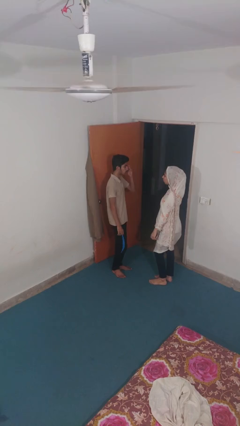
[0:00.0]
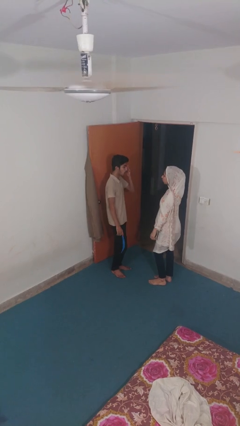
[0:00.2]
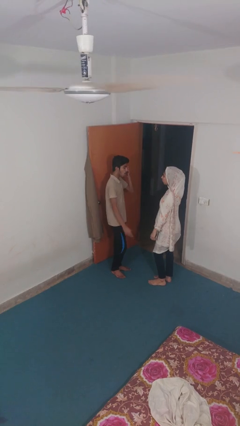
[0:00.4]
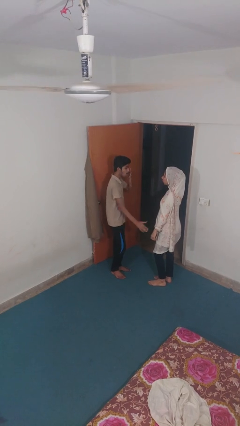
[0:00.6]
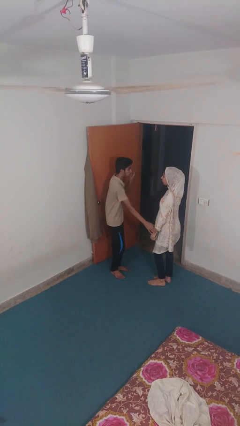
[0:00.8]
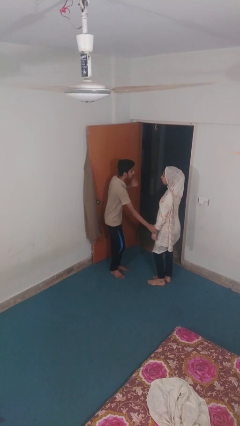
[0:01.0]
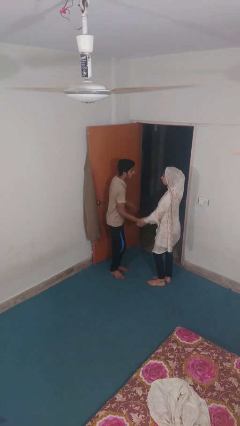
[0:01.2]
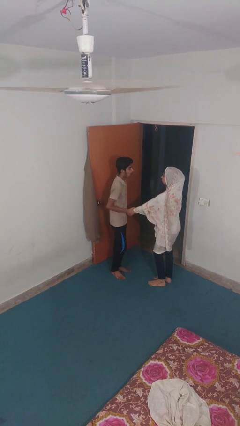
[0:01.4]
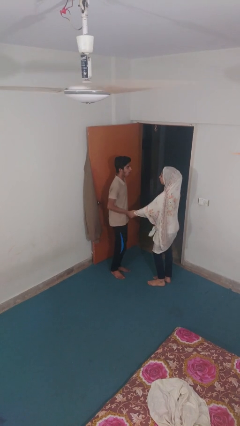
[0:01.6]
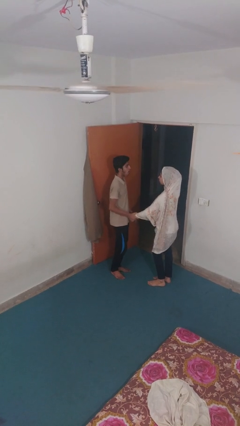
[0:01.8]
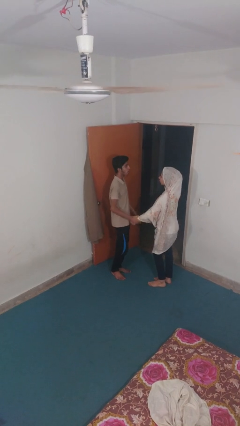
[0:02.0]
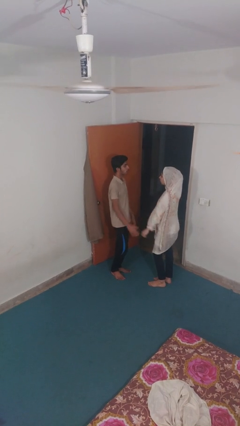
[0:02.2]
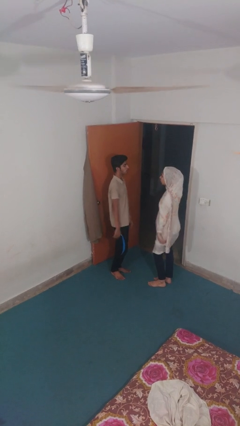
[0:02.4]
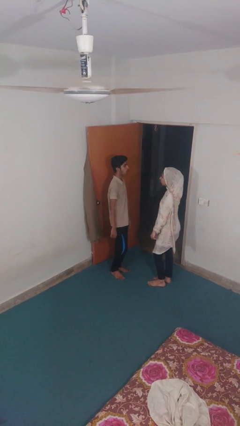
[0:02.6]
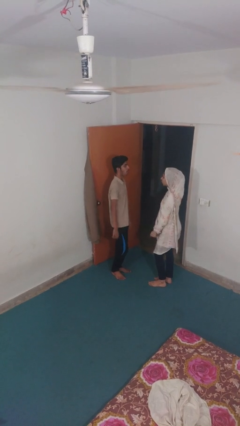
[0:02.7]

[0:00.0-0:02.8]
person grabs person by forearm

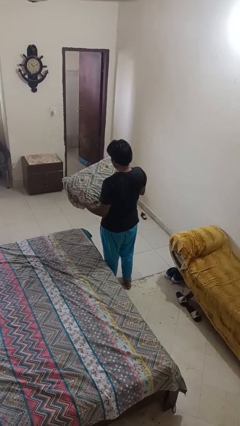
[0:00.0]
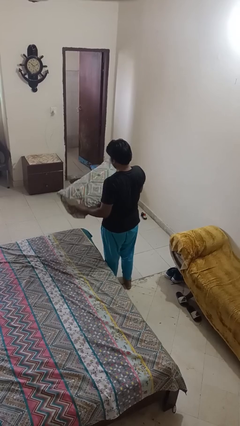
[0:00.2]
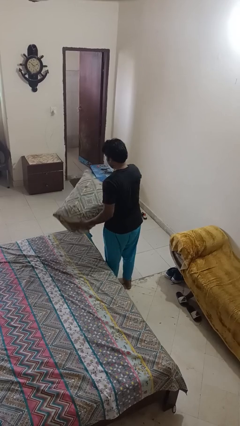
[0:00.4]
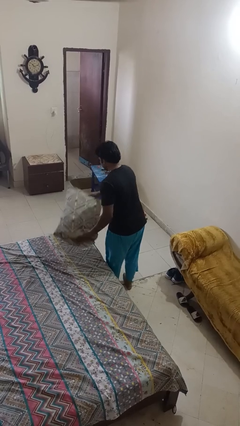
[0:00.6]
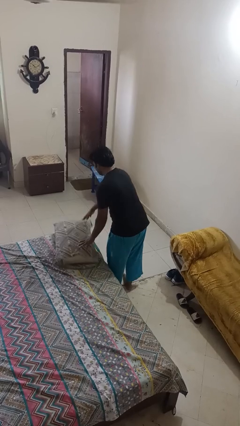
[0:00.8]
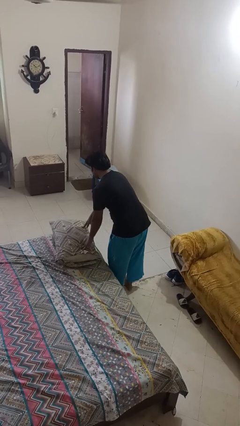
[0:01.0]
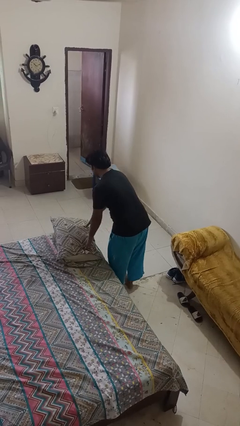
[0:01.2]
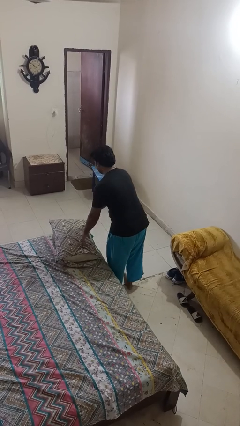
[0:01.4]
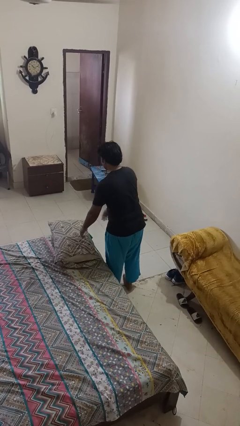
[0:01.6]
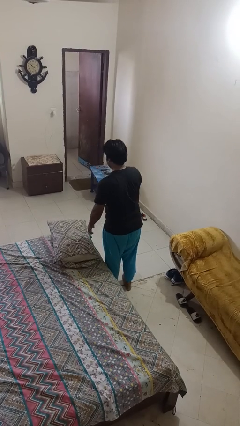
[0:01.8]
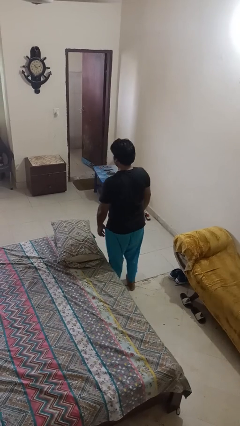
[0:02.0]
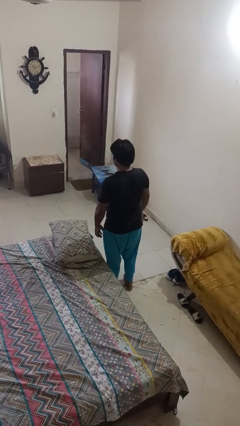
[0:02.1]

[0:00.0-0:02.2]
person puts down object on bed

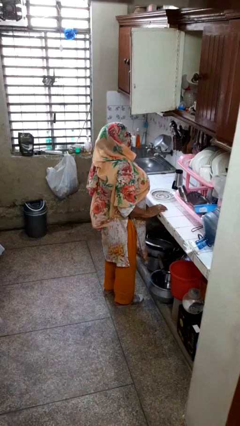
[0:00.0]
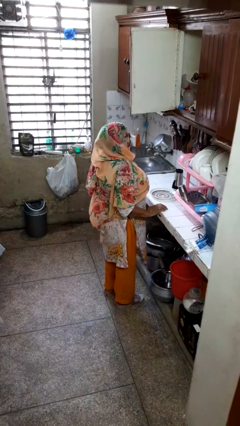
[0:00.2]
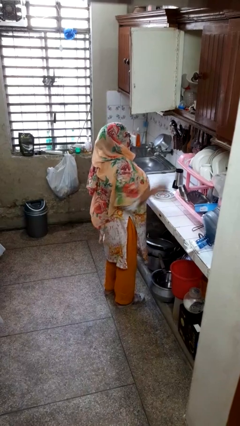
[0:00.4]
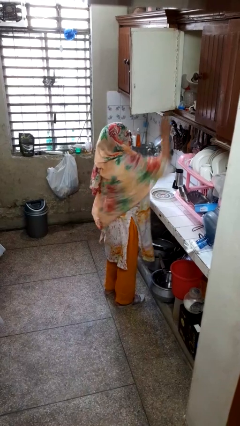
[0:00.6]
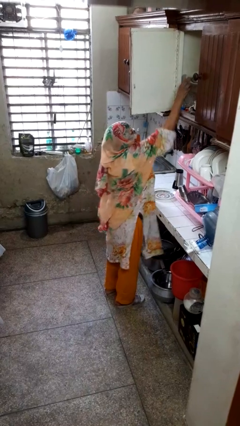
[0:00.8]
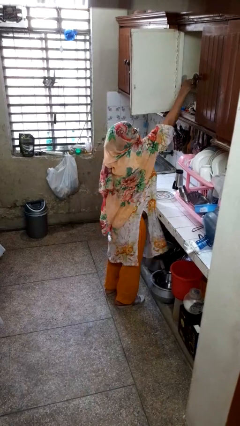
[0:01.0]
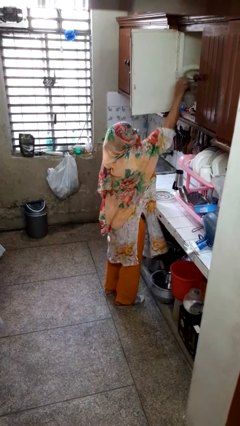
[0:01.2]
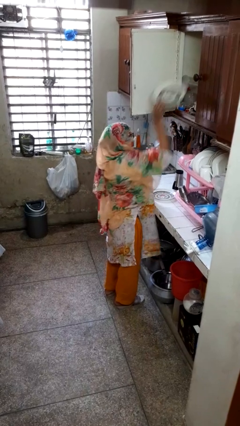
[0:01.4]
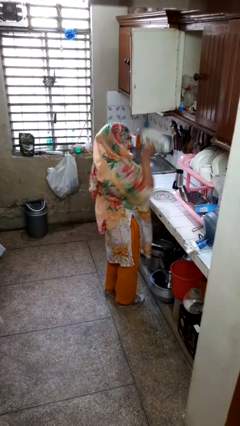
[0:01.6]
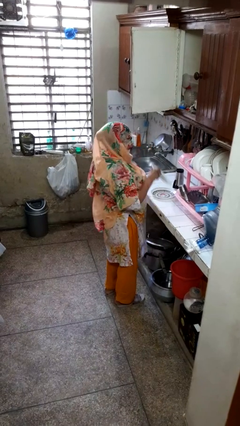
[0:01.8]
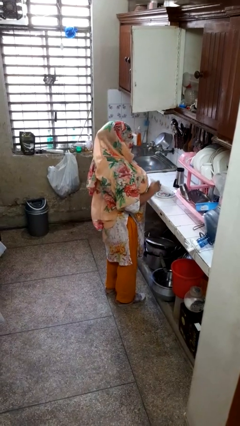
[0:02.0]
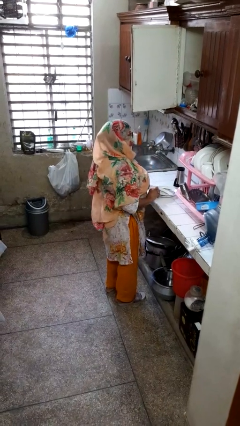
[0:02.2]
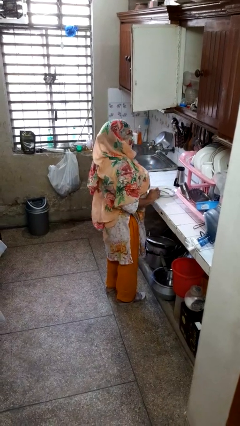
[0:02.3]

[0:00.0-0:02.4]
person takes object from cabinet

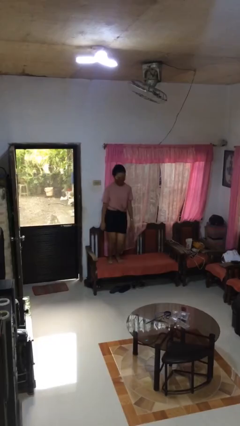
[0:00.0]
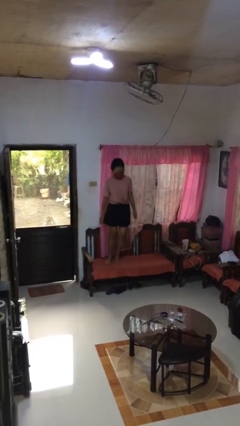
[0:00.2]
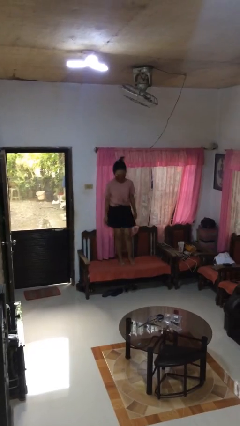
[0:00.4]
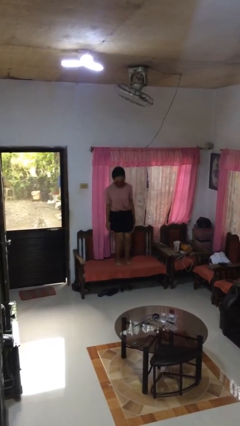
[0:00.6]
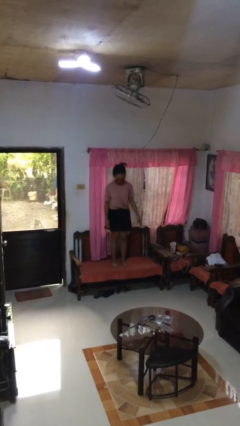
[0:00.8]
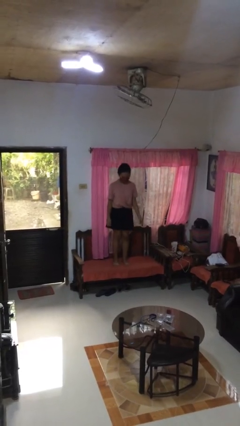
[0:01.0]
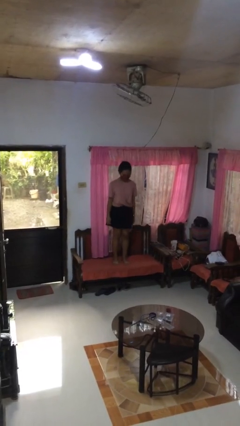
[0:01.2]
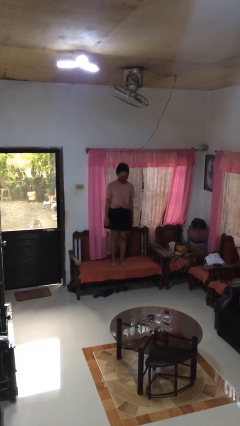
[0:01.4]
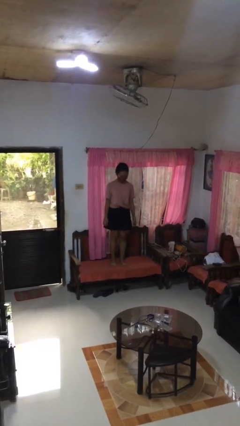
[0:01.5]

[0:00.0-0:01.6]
person jumps on couch

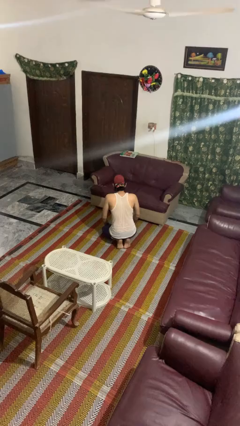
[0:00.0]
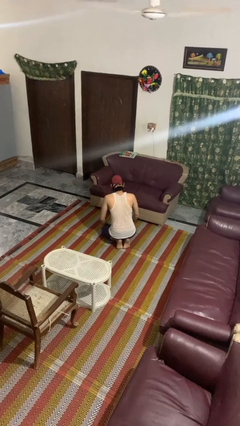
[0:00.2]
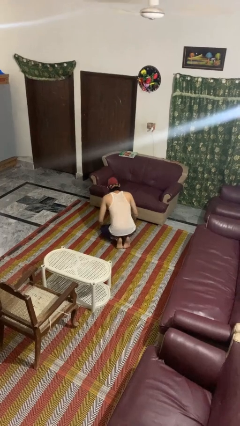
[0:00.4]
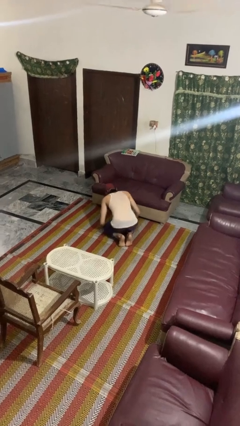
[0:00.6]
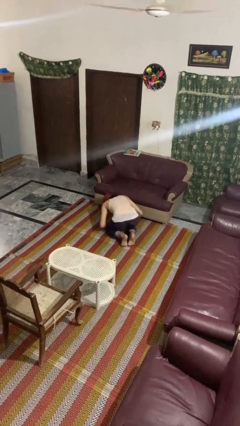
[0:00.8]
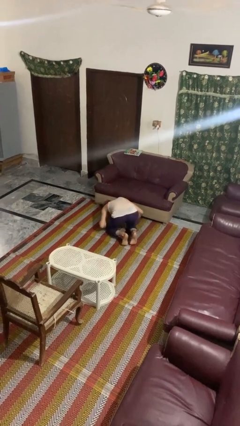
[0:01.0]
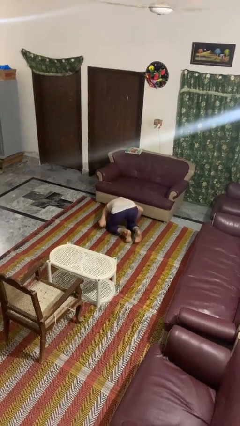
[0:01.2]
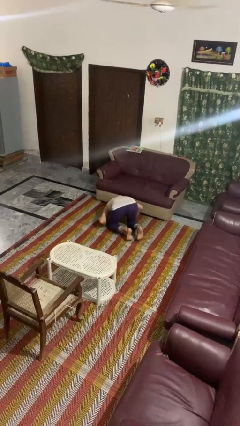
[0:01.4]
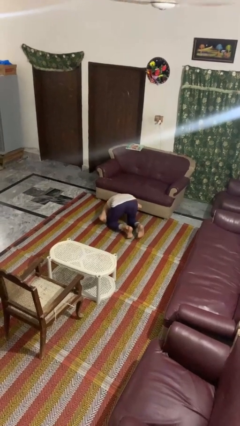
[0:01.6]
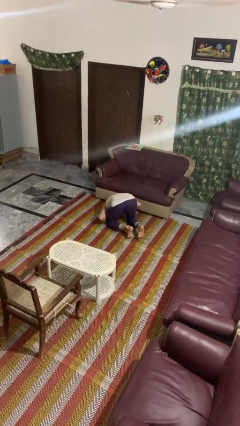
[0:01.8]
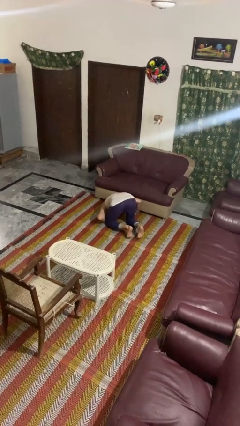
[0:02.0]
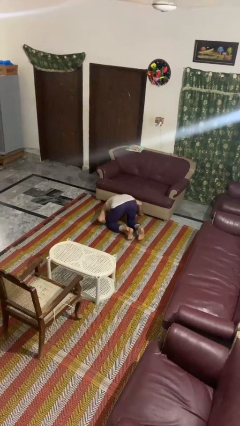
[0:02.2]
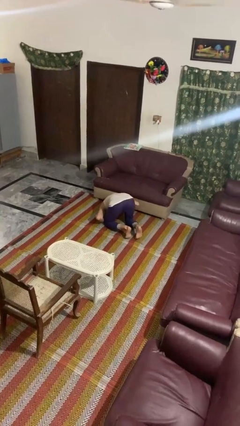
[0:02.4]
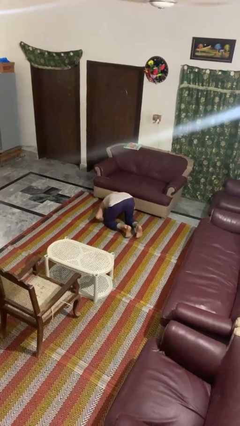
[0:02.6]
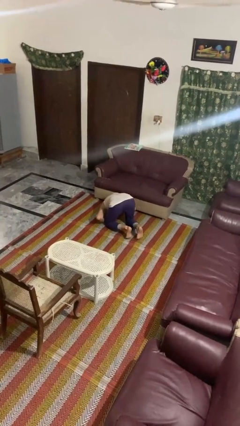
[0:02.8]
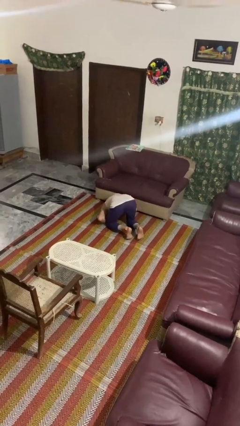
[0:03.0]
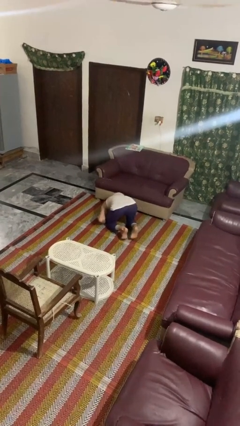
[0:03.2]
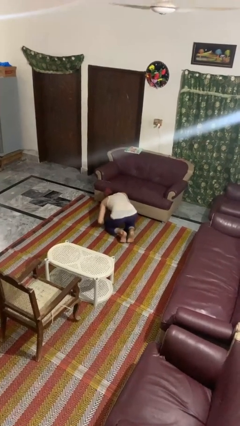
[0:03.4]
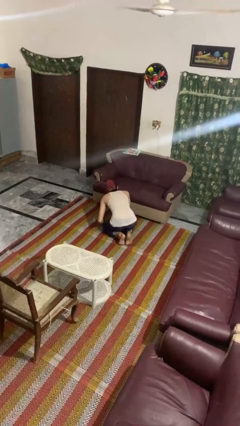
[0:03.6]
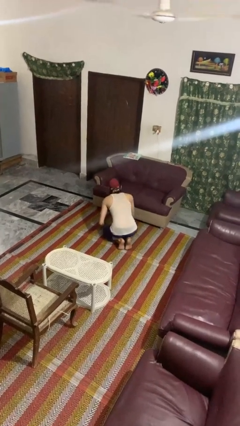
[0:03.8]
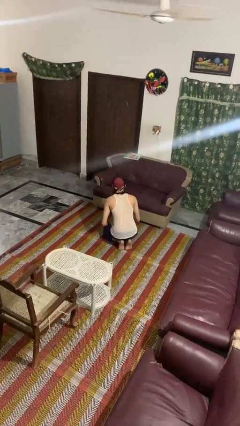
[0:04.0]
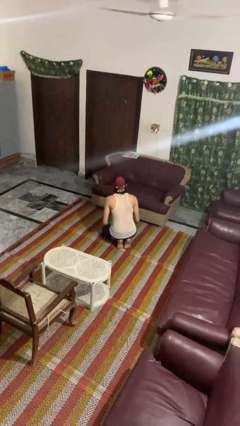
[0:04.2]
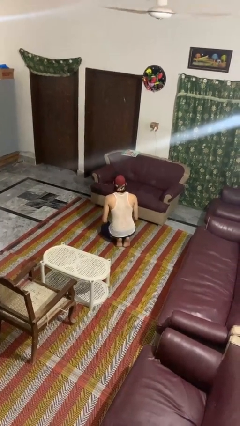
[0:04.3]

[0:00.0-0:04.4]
person searches under couch

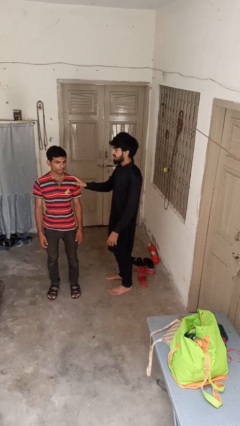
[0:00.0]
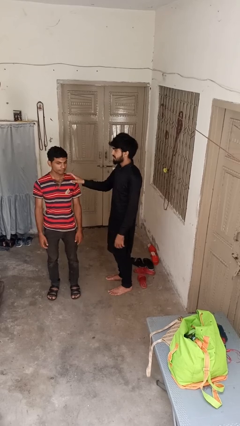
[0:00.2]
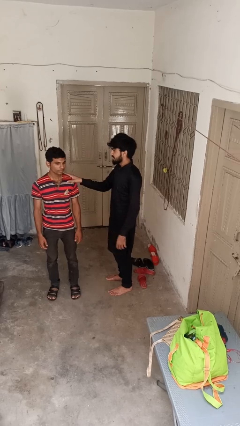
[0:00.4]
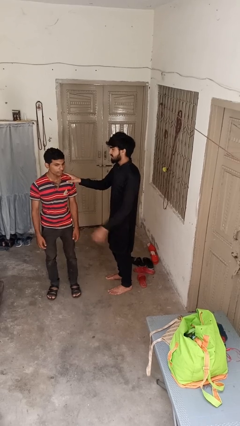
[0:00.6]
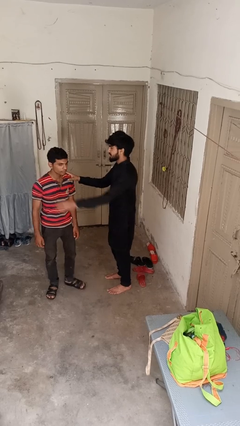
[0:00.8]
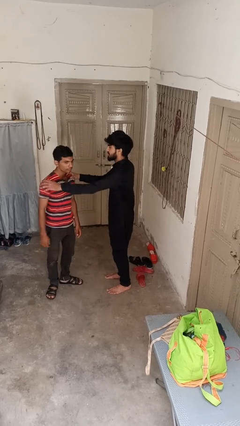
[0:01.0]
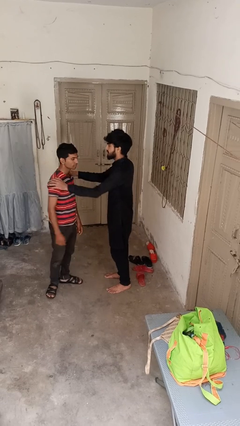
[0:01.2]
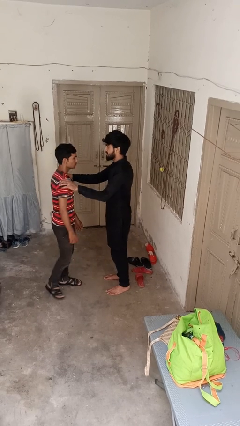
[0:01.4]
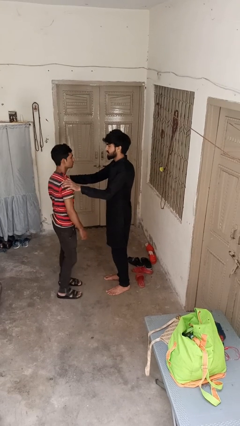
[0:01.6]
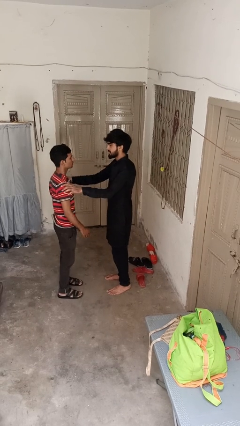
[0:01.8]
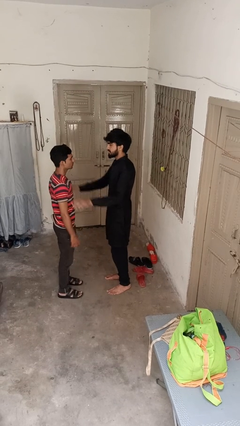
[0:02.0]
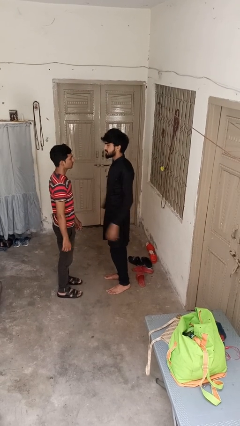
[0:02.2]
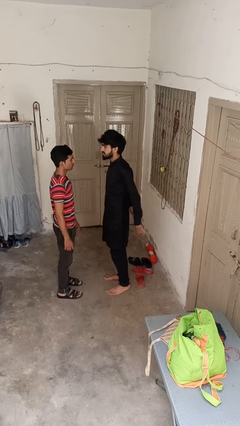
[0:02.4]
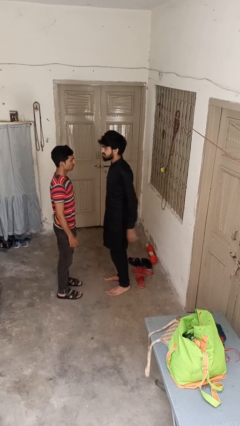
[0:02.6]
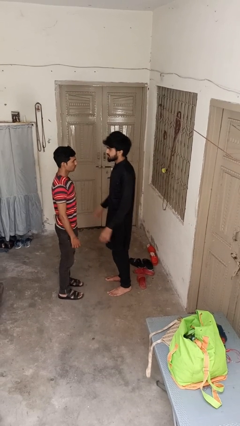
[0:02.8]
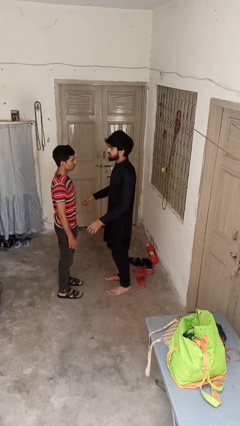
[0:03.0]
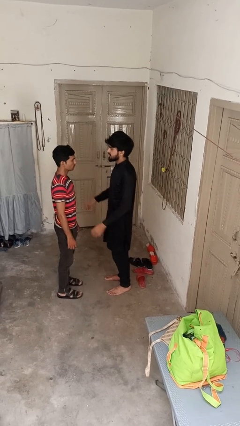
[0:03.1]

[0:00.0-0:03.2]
person spins person around

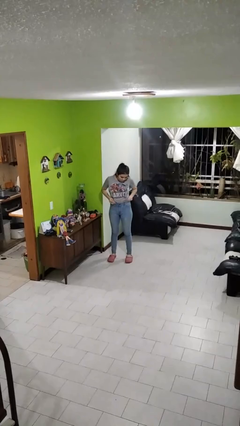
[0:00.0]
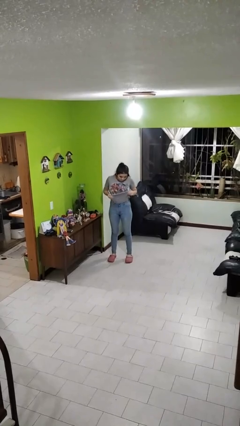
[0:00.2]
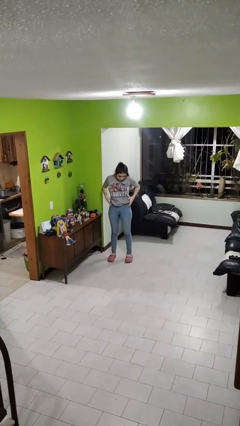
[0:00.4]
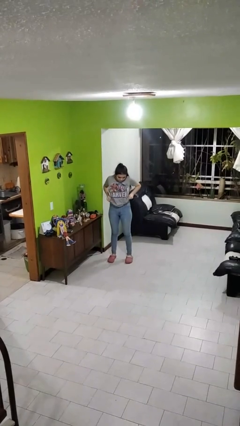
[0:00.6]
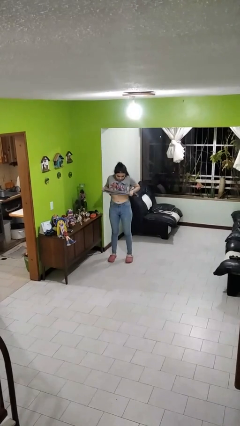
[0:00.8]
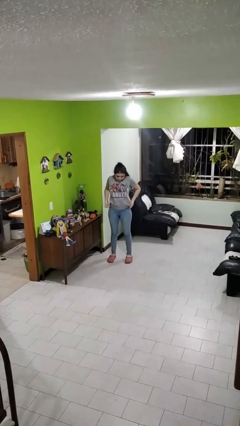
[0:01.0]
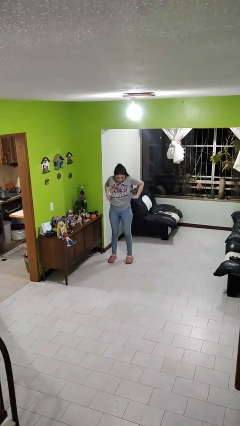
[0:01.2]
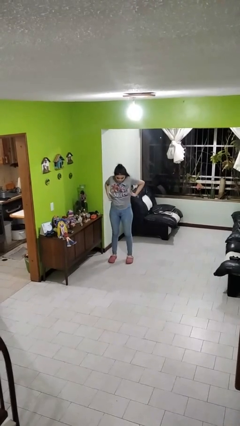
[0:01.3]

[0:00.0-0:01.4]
person untucks shirt
